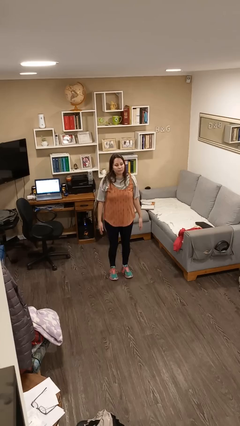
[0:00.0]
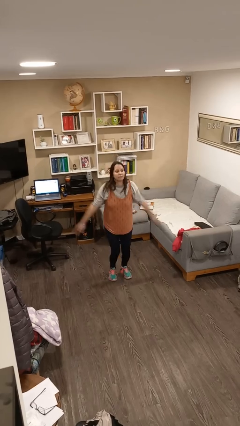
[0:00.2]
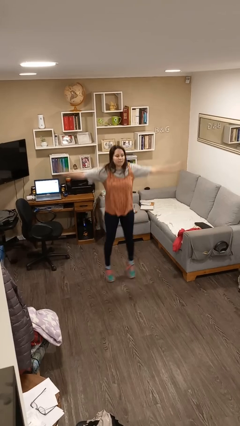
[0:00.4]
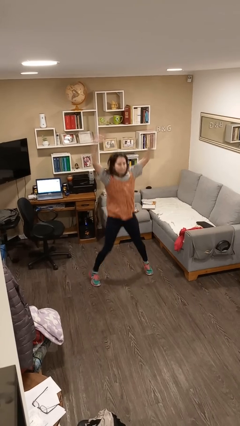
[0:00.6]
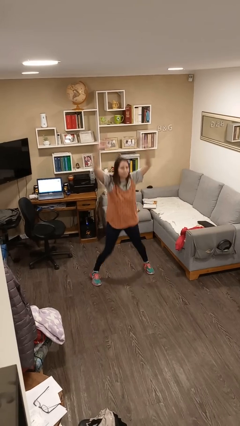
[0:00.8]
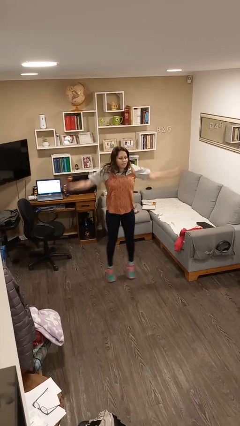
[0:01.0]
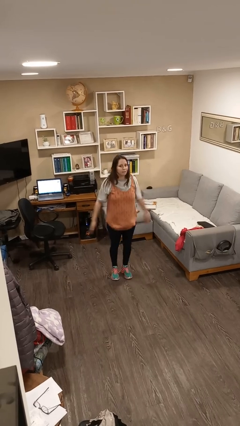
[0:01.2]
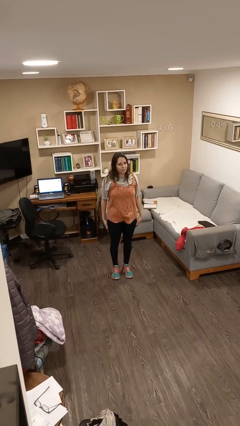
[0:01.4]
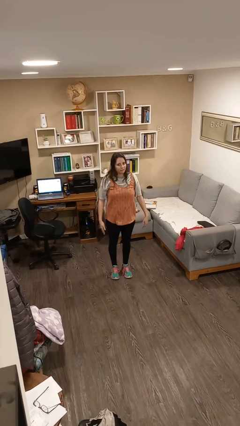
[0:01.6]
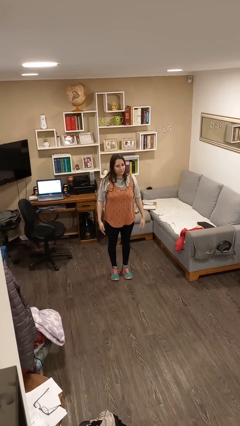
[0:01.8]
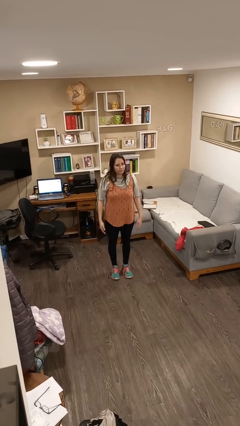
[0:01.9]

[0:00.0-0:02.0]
person exercises with jumping jacks

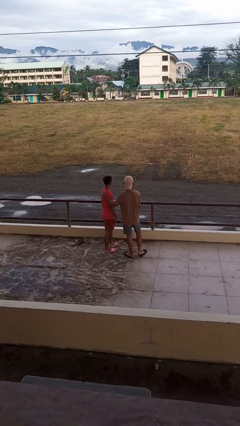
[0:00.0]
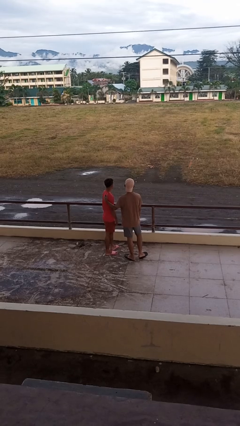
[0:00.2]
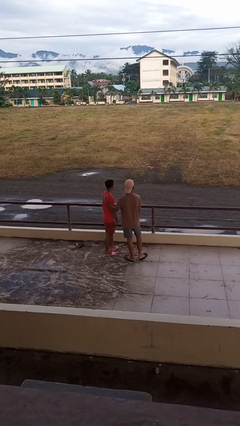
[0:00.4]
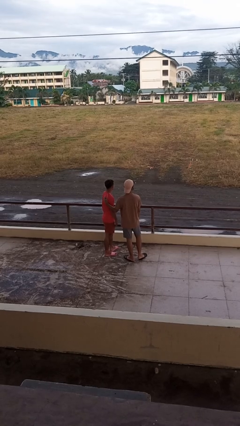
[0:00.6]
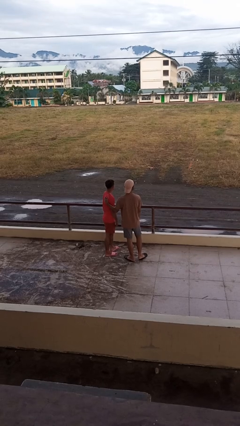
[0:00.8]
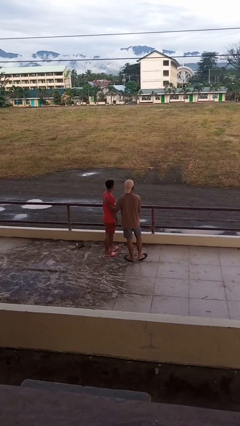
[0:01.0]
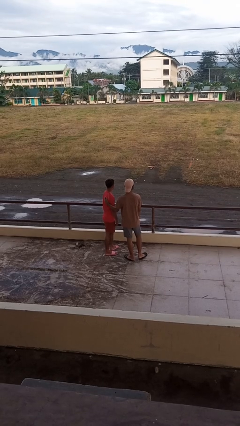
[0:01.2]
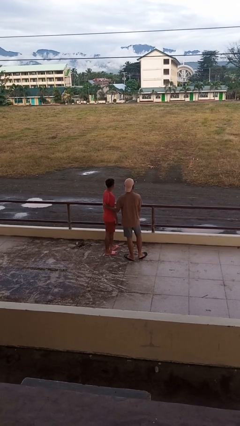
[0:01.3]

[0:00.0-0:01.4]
person touches back of person

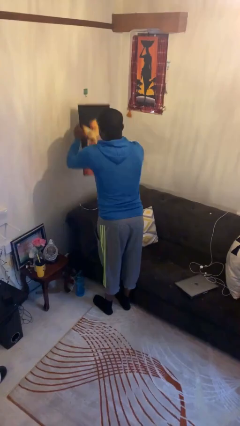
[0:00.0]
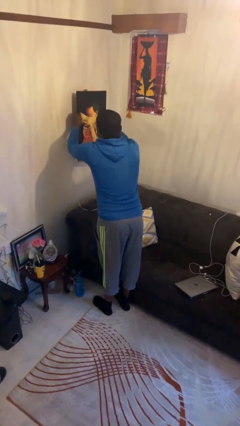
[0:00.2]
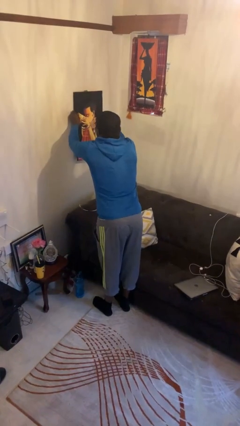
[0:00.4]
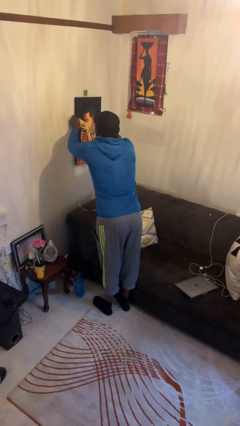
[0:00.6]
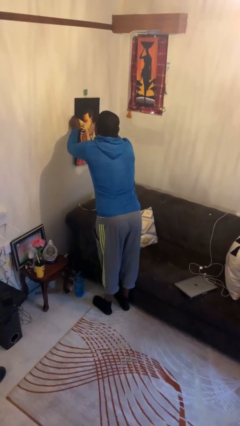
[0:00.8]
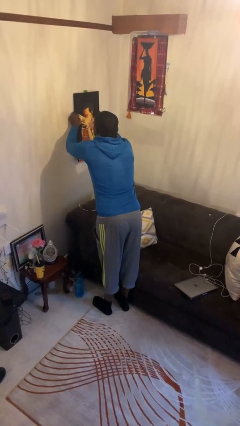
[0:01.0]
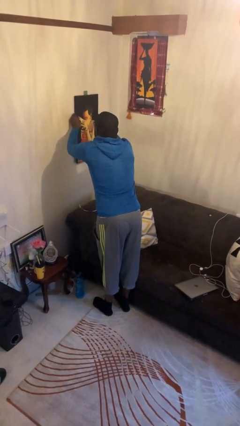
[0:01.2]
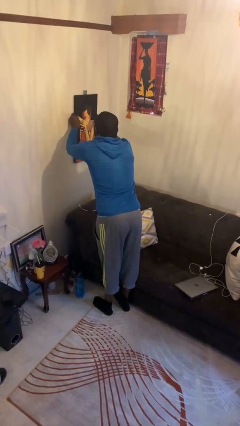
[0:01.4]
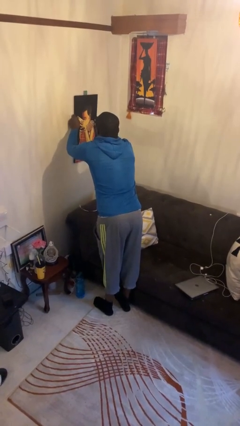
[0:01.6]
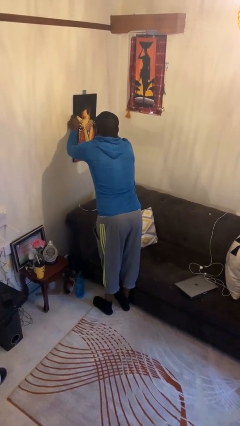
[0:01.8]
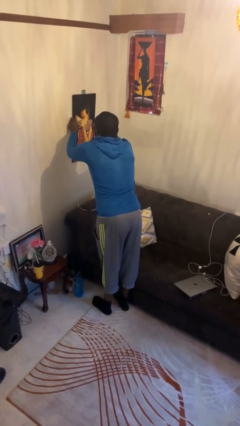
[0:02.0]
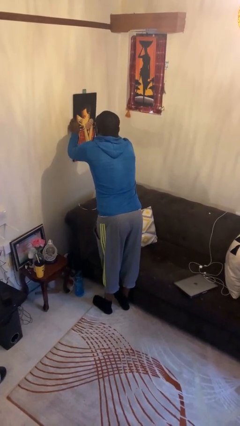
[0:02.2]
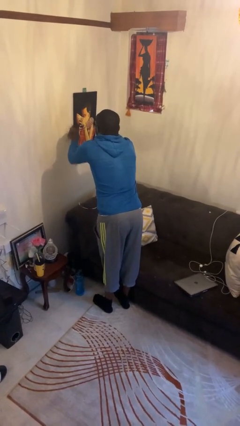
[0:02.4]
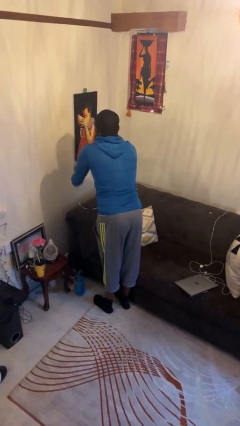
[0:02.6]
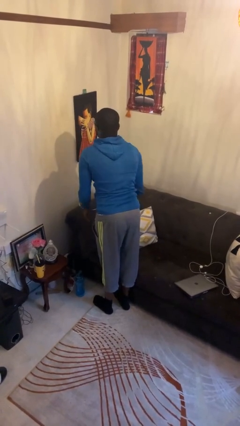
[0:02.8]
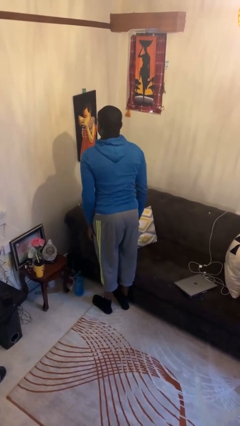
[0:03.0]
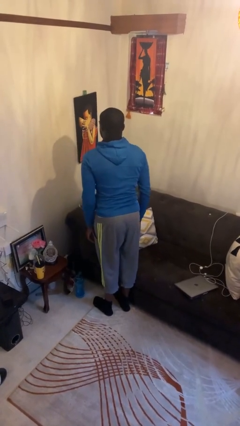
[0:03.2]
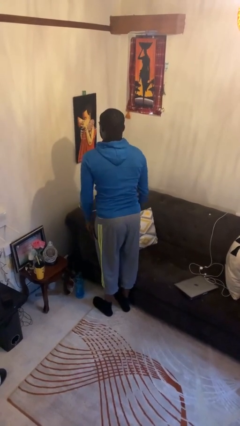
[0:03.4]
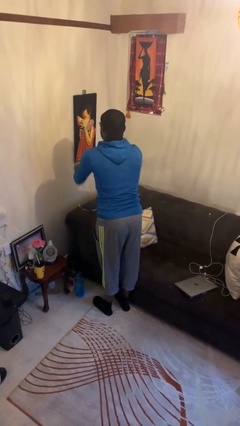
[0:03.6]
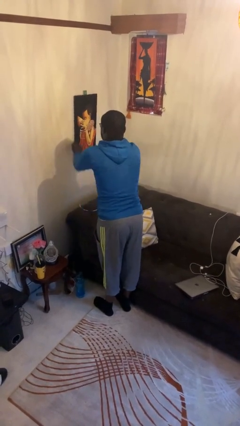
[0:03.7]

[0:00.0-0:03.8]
person puts up picture frame

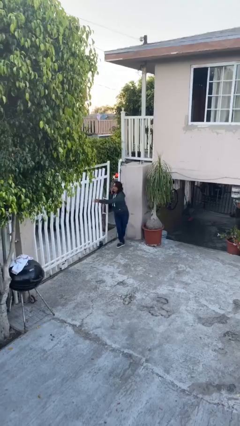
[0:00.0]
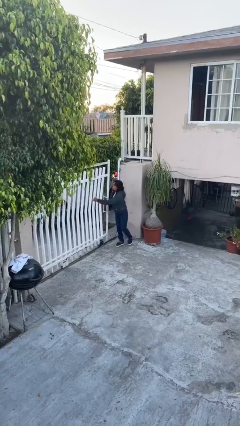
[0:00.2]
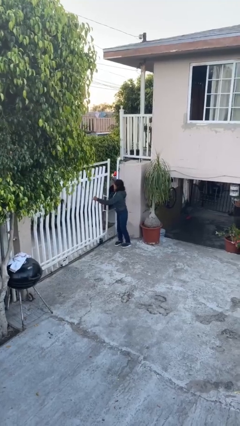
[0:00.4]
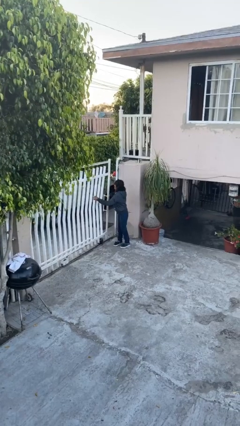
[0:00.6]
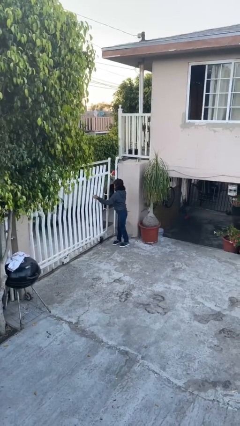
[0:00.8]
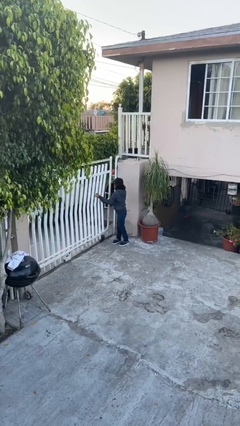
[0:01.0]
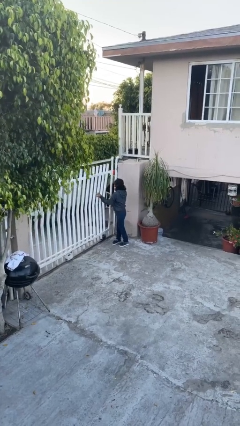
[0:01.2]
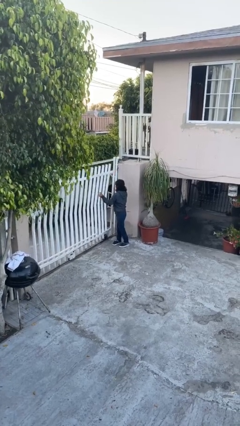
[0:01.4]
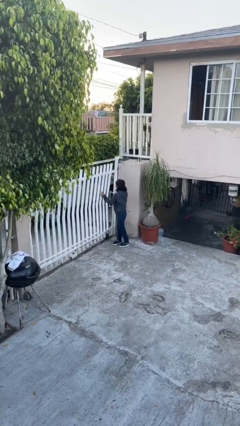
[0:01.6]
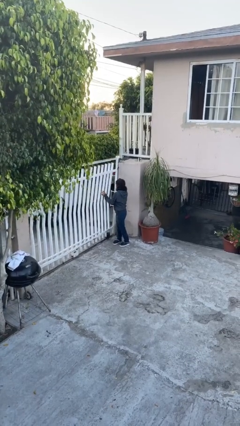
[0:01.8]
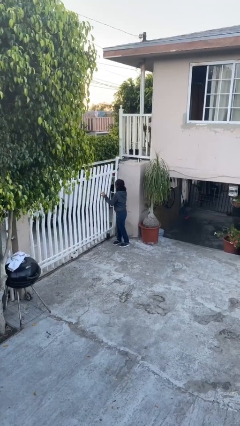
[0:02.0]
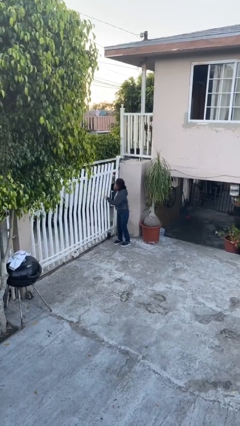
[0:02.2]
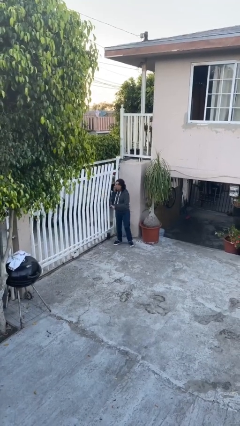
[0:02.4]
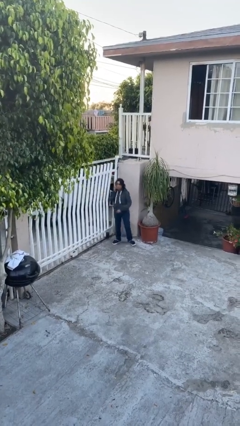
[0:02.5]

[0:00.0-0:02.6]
person closes facility door

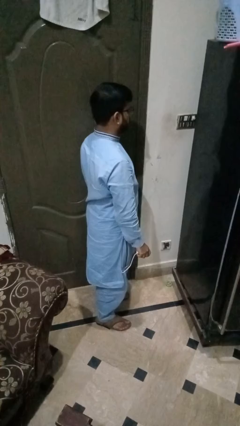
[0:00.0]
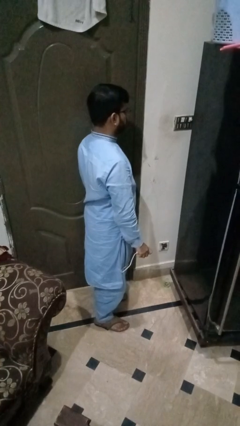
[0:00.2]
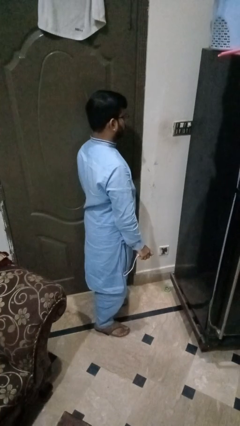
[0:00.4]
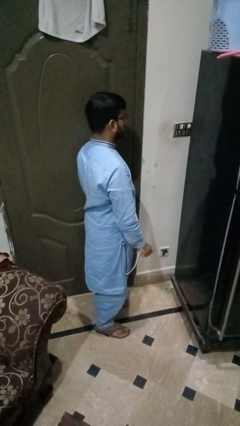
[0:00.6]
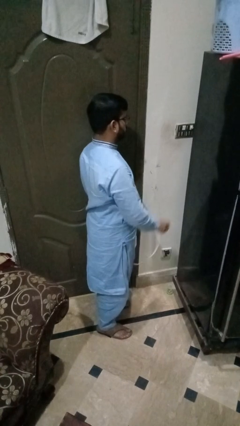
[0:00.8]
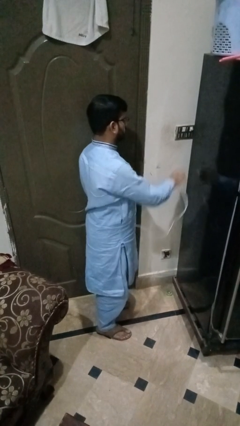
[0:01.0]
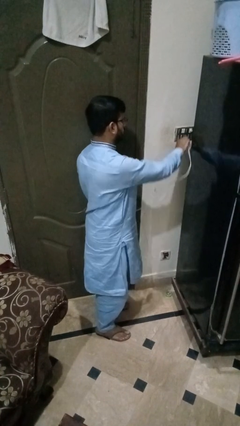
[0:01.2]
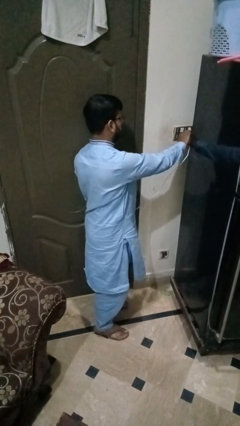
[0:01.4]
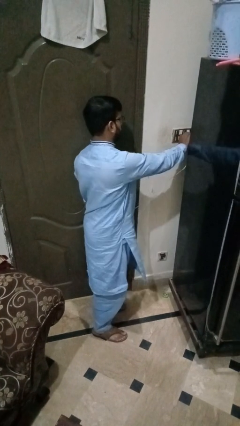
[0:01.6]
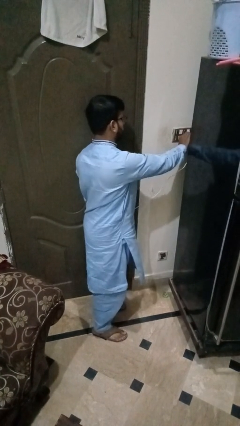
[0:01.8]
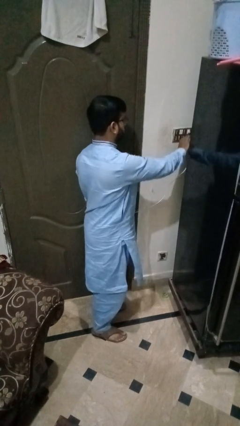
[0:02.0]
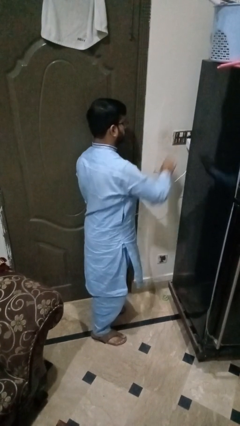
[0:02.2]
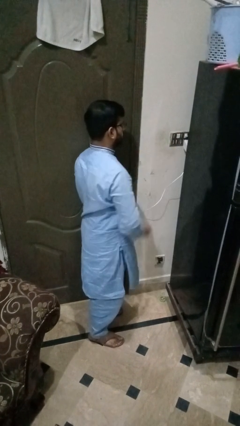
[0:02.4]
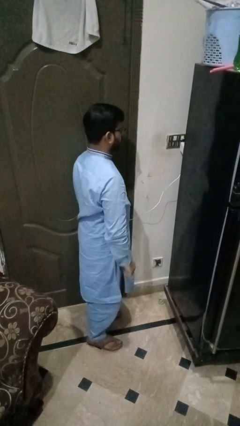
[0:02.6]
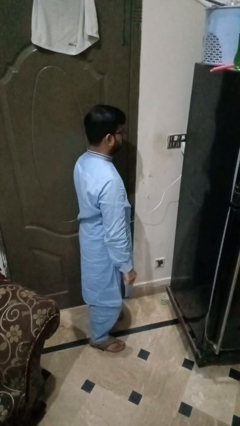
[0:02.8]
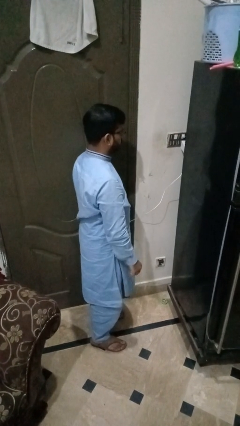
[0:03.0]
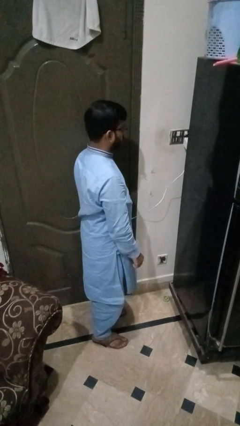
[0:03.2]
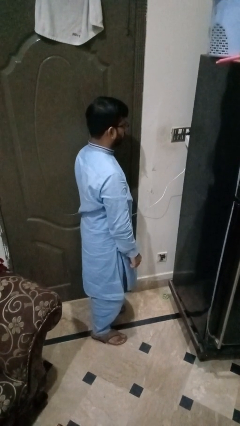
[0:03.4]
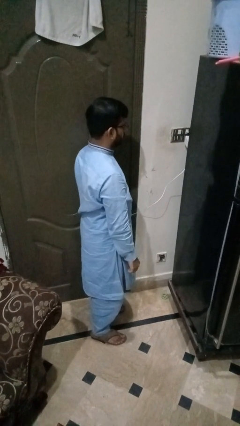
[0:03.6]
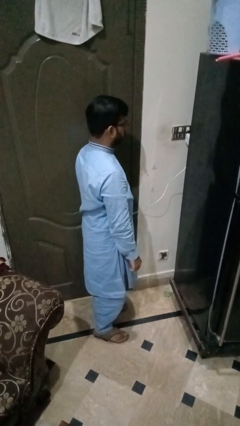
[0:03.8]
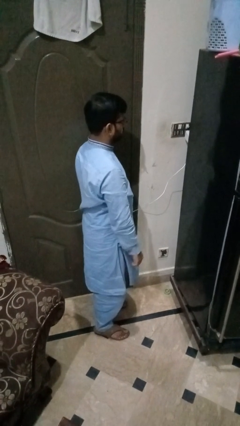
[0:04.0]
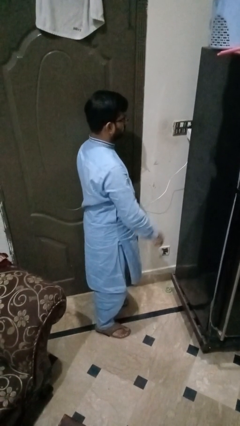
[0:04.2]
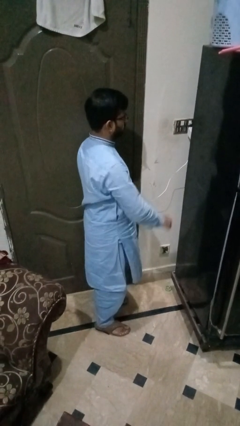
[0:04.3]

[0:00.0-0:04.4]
person plugs into electrical socket

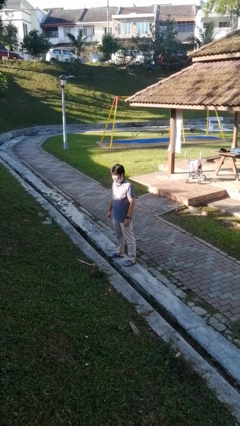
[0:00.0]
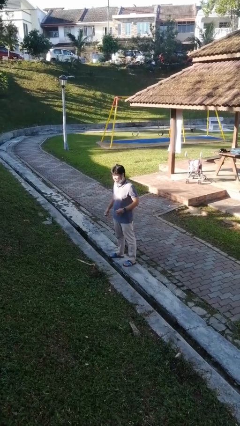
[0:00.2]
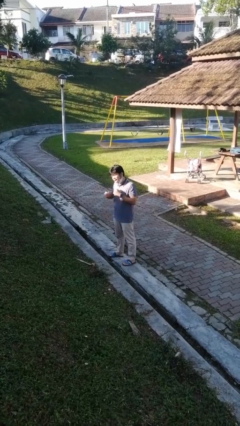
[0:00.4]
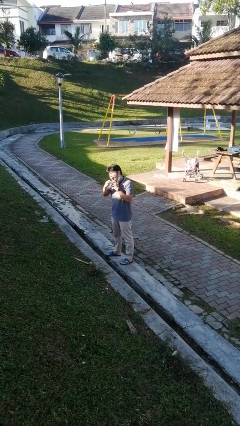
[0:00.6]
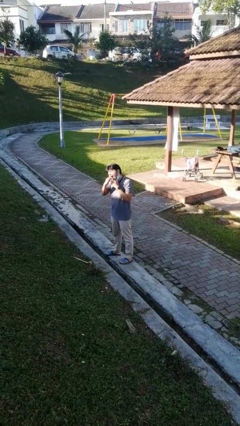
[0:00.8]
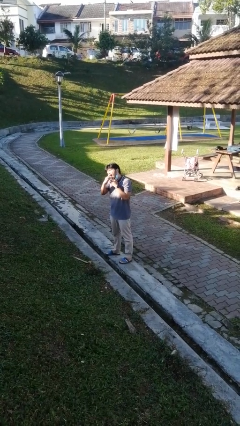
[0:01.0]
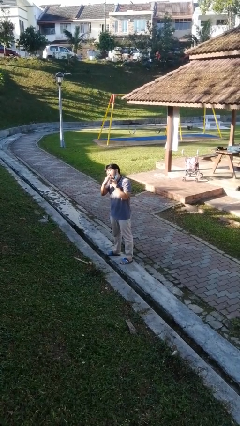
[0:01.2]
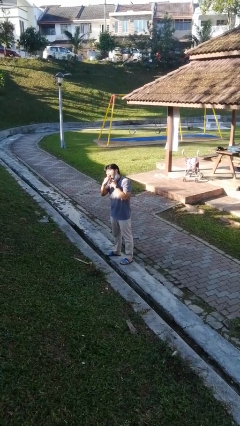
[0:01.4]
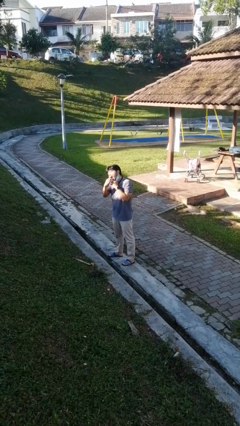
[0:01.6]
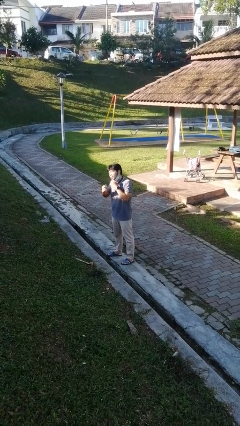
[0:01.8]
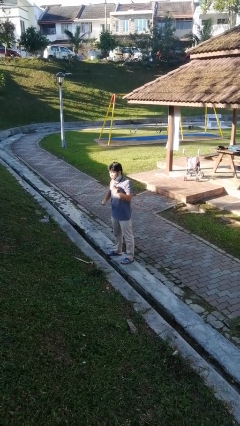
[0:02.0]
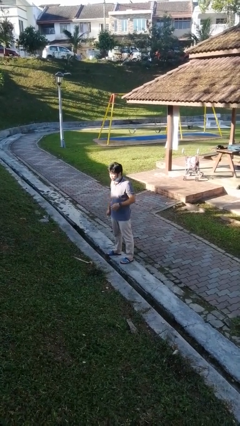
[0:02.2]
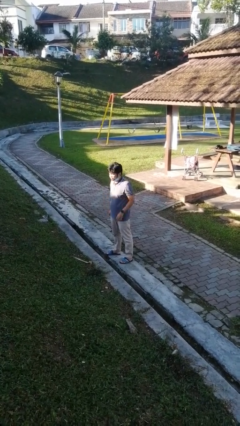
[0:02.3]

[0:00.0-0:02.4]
person flosses

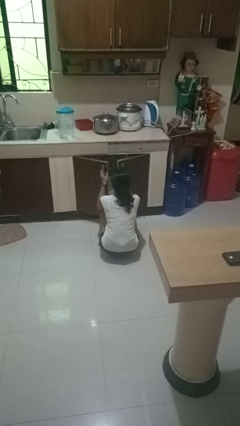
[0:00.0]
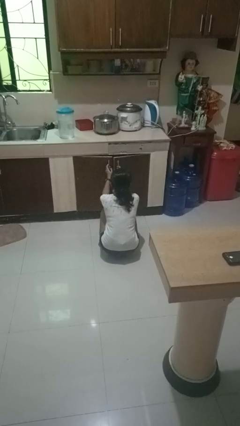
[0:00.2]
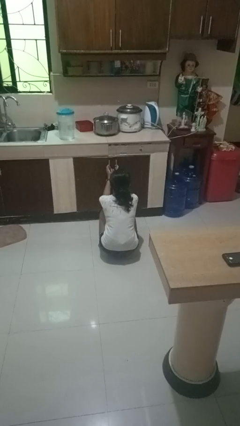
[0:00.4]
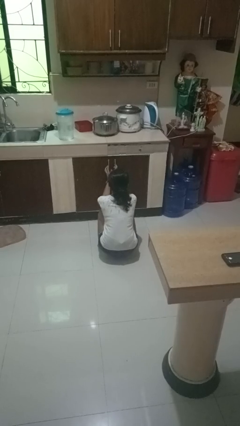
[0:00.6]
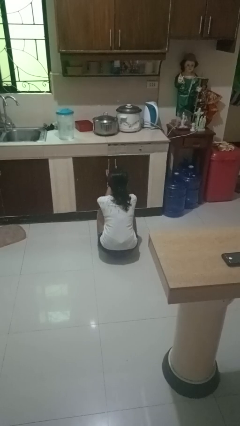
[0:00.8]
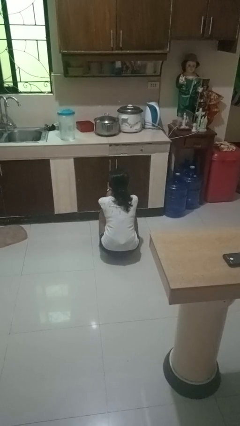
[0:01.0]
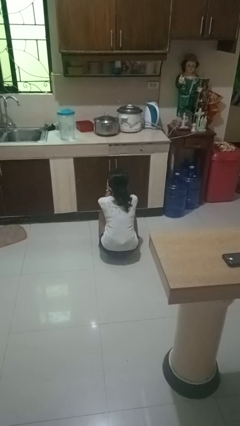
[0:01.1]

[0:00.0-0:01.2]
person closes dishwasher
